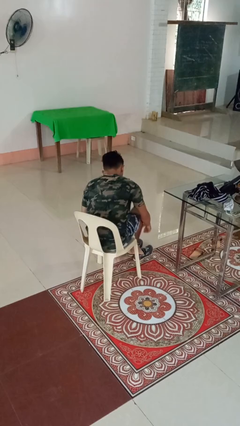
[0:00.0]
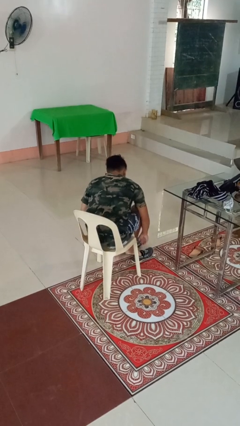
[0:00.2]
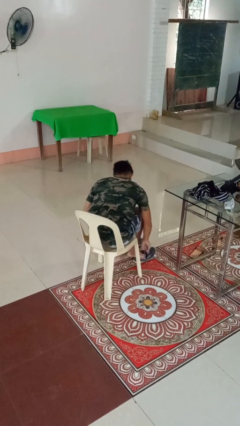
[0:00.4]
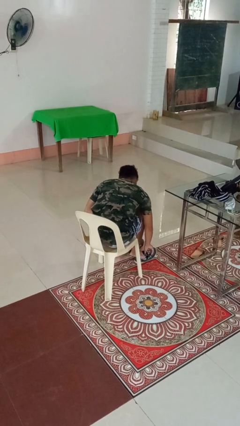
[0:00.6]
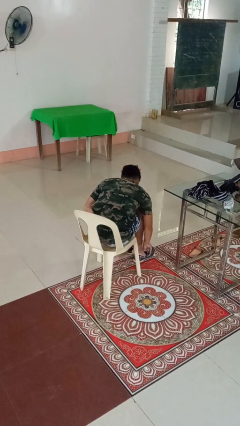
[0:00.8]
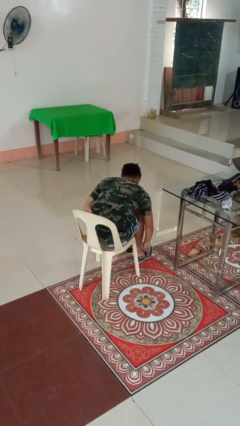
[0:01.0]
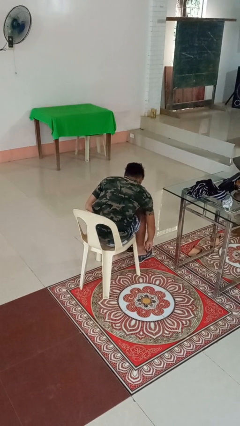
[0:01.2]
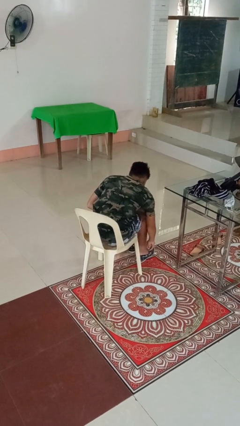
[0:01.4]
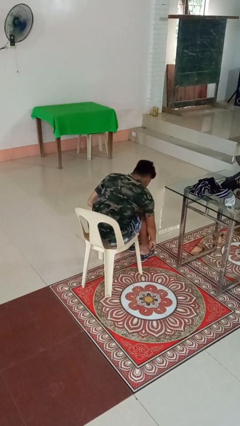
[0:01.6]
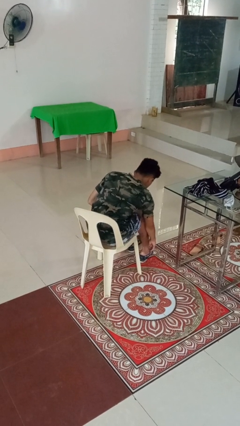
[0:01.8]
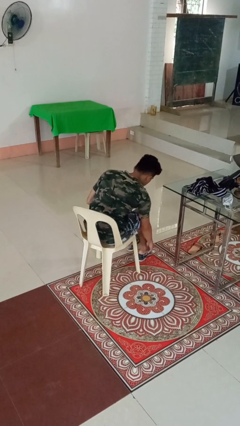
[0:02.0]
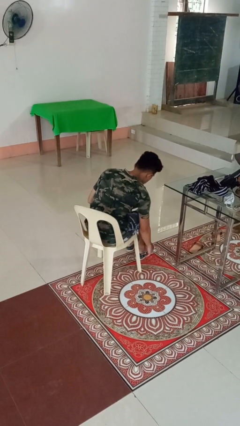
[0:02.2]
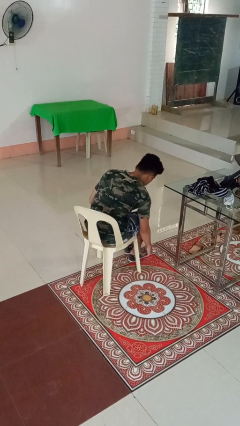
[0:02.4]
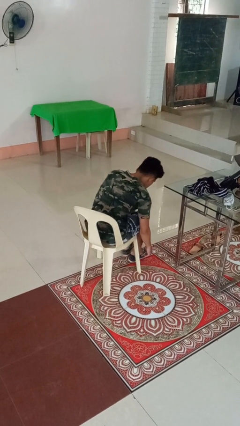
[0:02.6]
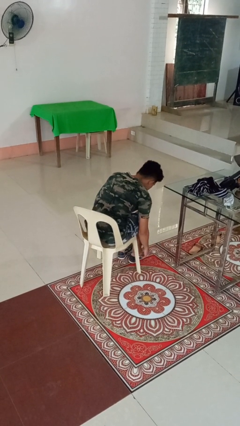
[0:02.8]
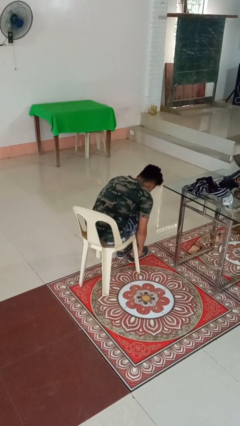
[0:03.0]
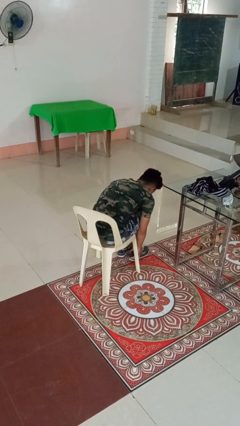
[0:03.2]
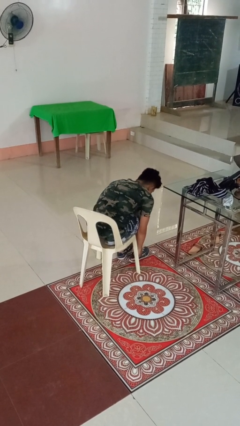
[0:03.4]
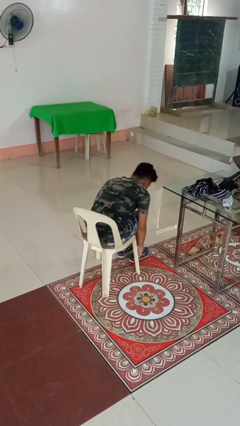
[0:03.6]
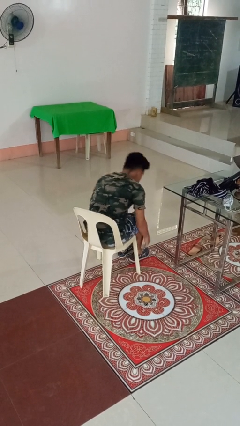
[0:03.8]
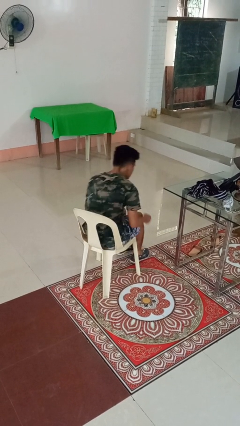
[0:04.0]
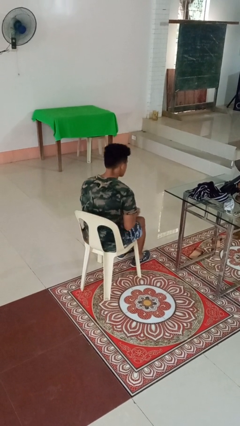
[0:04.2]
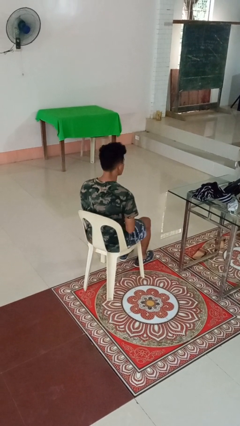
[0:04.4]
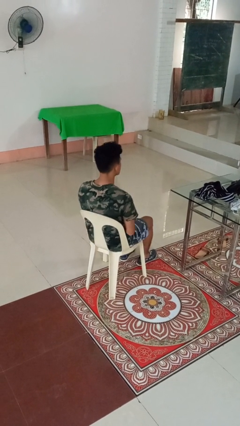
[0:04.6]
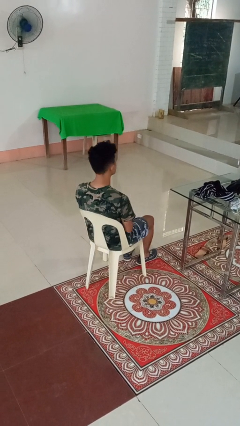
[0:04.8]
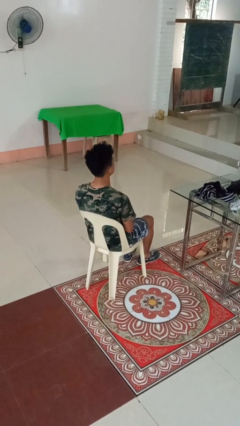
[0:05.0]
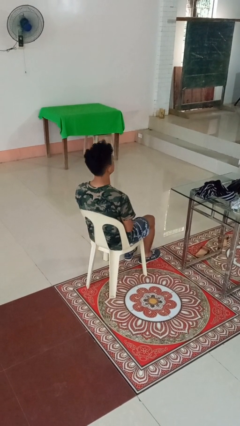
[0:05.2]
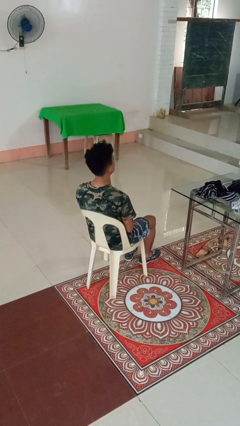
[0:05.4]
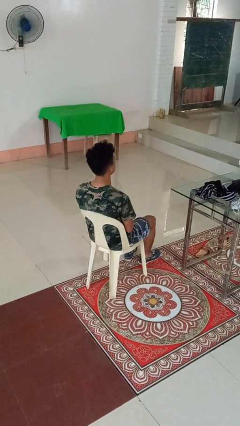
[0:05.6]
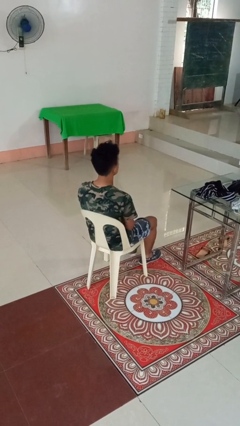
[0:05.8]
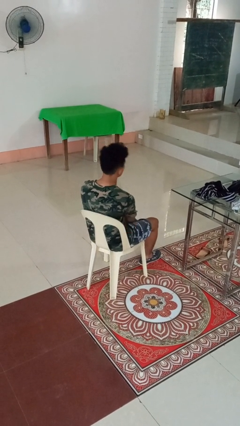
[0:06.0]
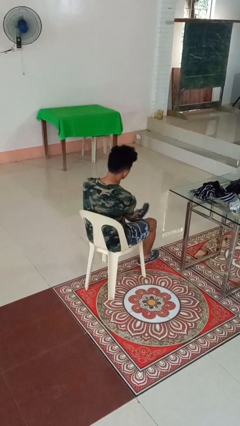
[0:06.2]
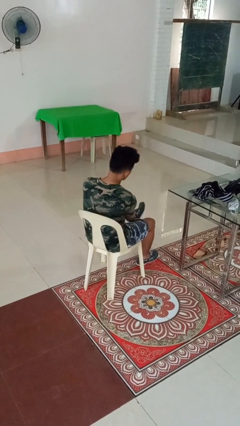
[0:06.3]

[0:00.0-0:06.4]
person puts on shoes

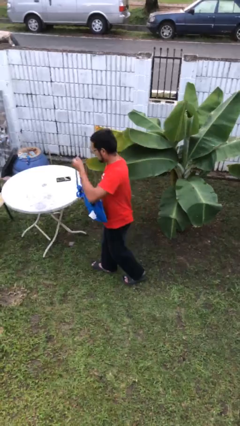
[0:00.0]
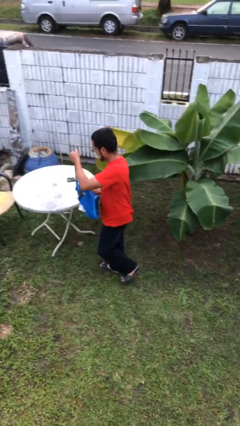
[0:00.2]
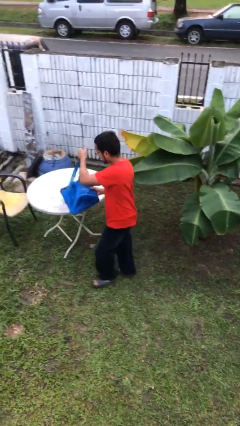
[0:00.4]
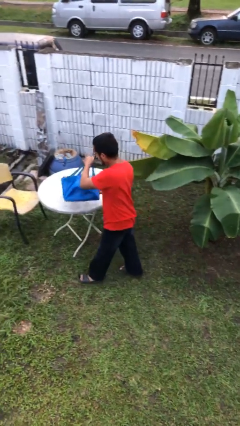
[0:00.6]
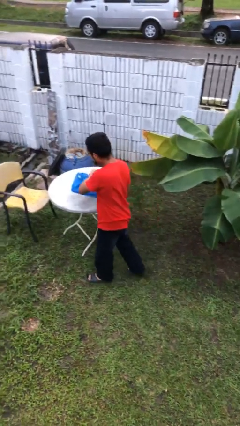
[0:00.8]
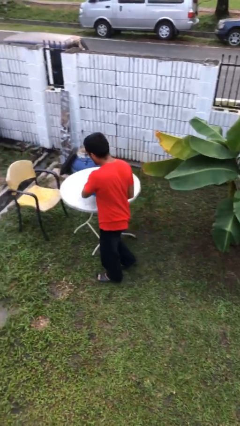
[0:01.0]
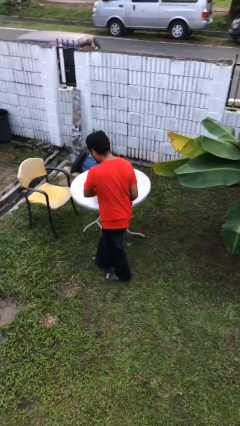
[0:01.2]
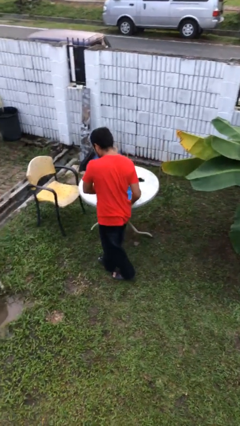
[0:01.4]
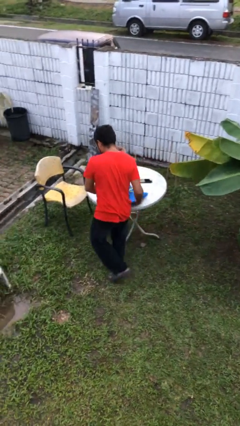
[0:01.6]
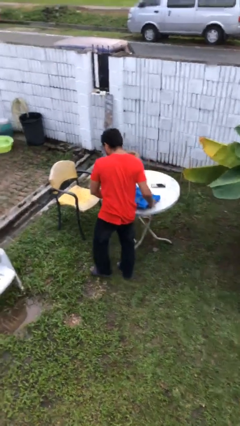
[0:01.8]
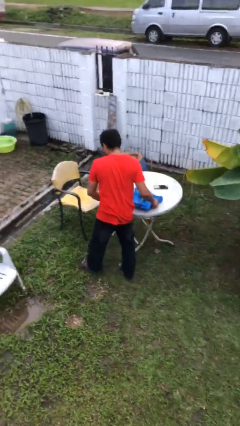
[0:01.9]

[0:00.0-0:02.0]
person puts down object on table

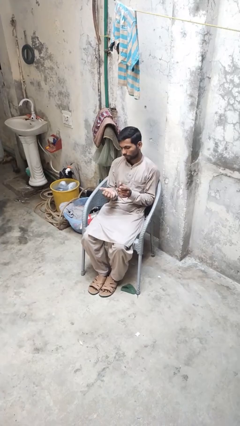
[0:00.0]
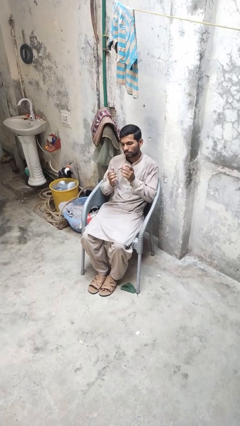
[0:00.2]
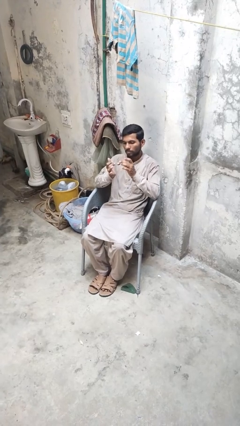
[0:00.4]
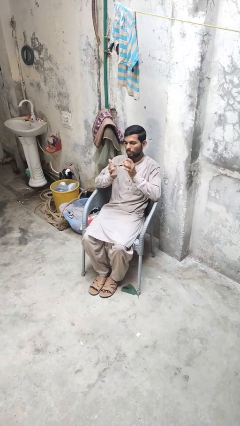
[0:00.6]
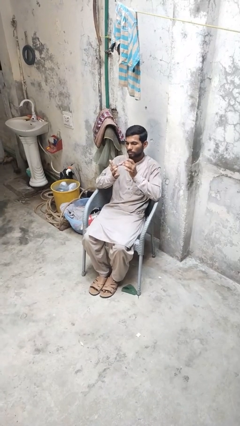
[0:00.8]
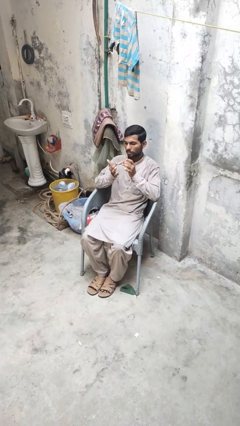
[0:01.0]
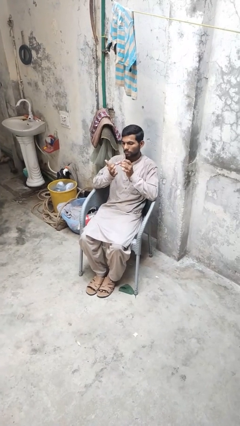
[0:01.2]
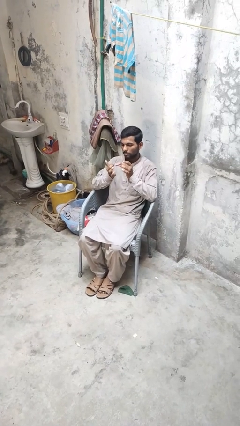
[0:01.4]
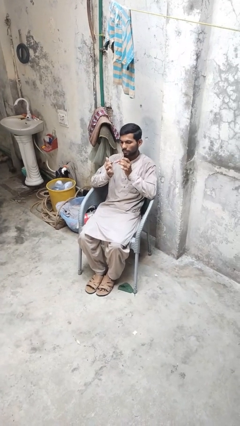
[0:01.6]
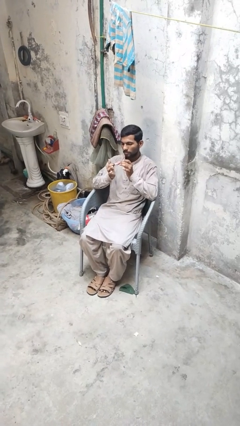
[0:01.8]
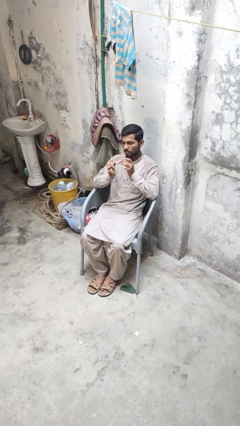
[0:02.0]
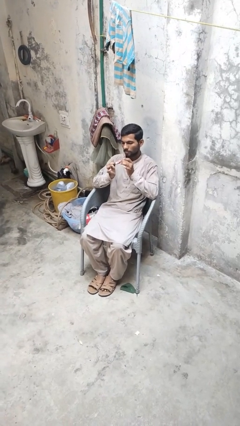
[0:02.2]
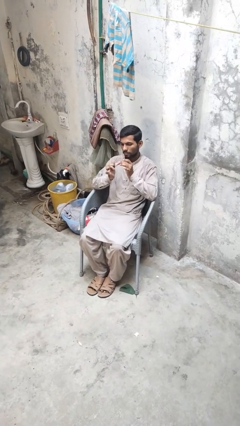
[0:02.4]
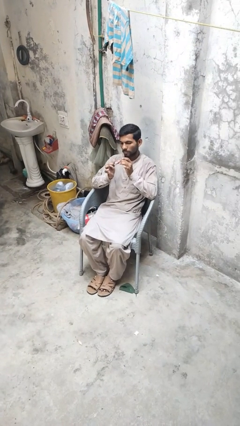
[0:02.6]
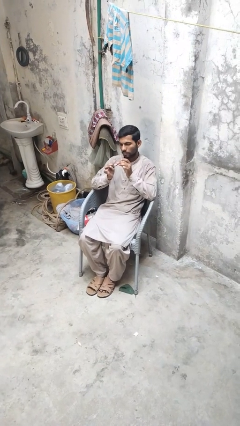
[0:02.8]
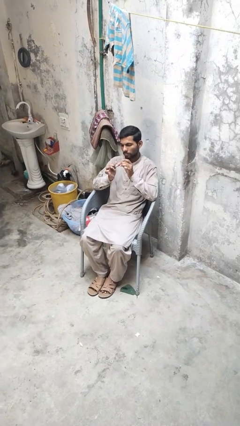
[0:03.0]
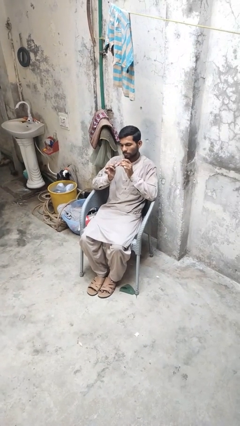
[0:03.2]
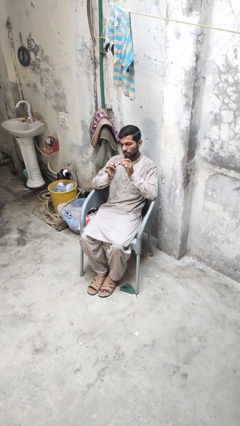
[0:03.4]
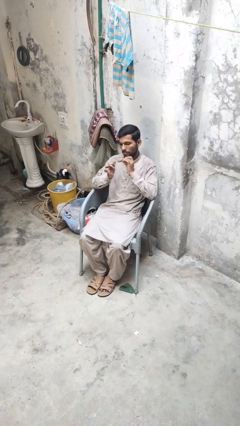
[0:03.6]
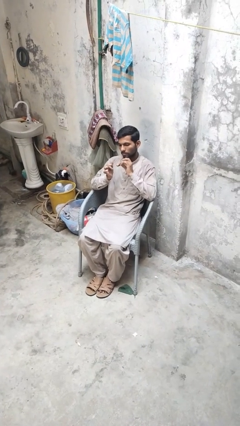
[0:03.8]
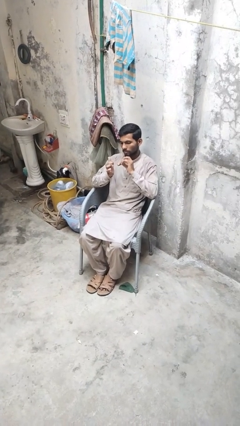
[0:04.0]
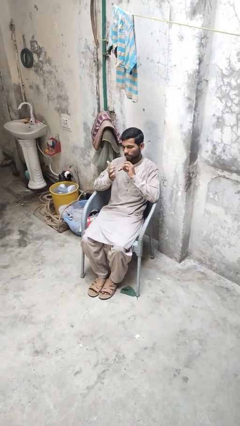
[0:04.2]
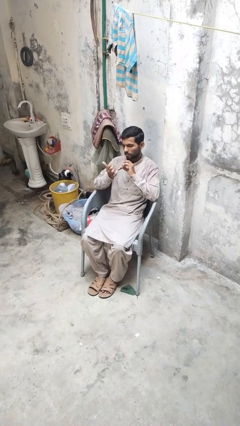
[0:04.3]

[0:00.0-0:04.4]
person clips fingernails

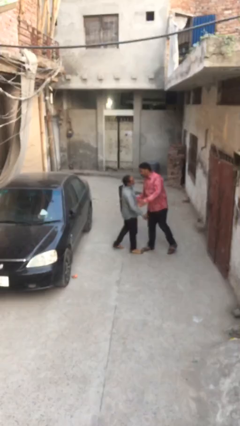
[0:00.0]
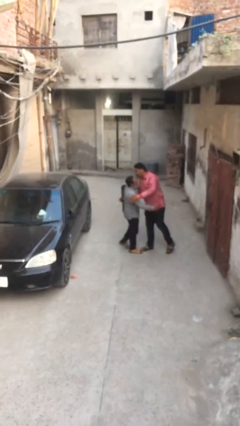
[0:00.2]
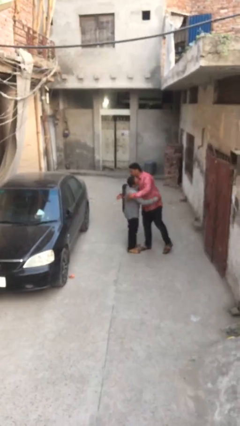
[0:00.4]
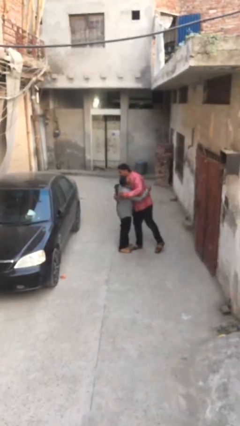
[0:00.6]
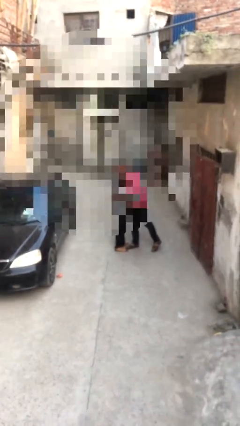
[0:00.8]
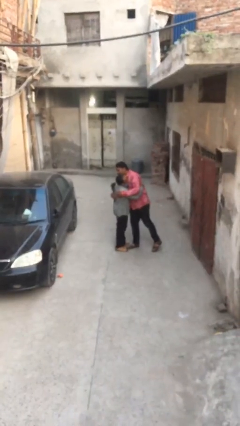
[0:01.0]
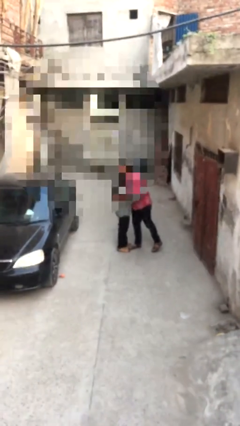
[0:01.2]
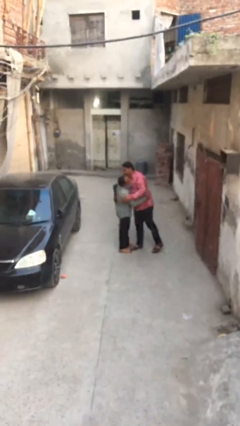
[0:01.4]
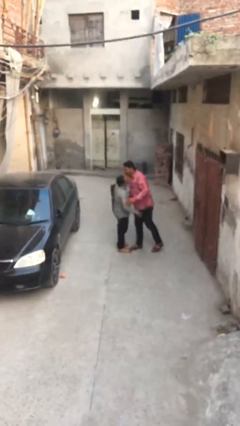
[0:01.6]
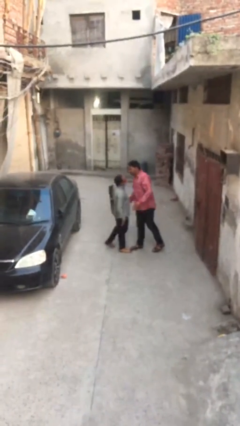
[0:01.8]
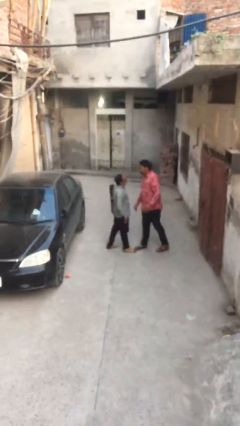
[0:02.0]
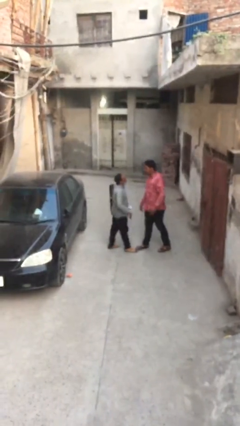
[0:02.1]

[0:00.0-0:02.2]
person embraces person

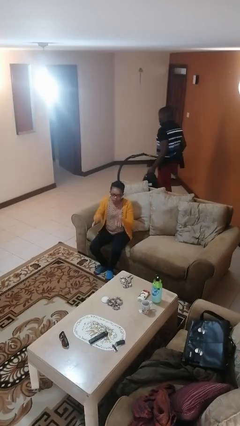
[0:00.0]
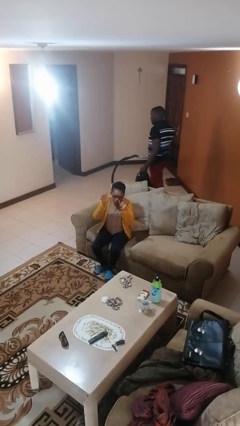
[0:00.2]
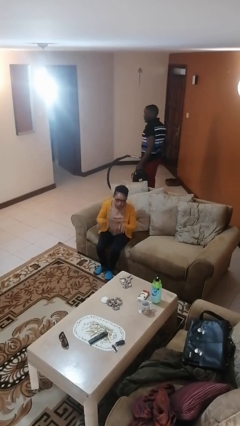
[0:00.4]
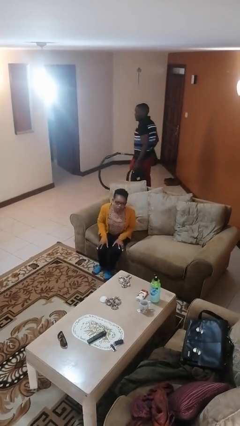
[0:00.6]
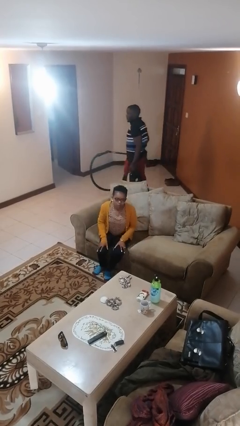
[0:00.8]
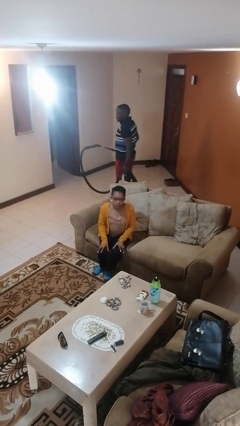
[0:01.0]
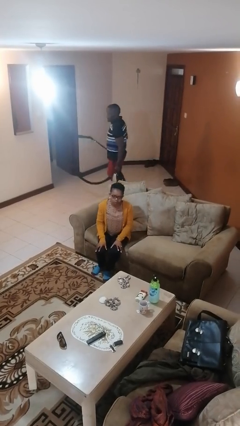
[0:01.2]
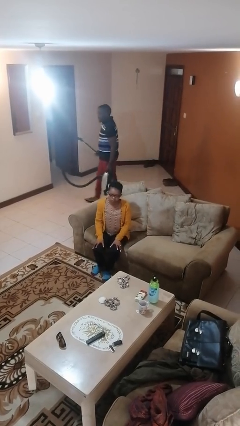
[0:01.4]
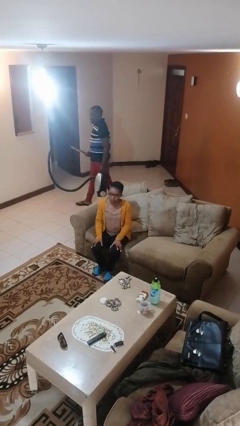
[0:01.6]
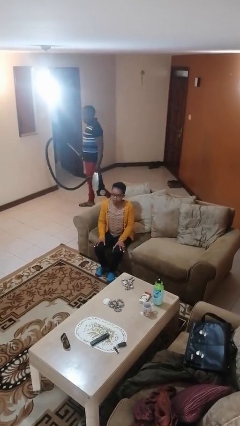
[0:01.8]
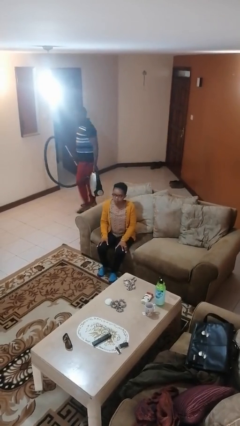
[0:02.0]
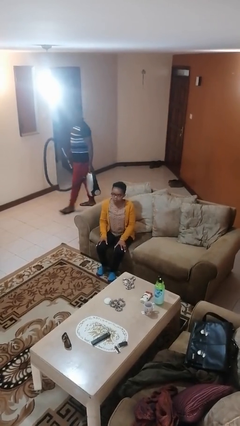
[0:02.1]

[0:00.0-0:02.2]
person slaps hands on thighs

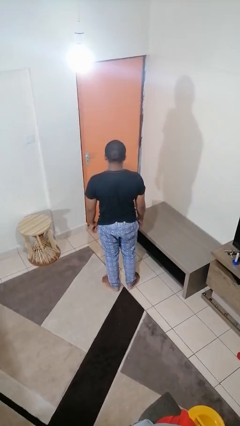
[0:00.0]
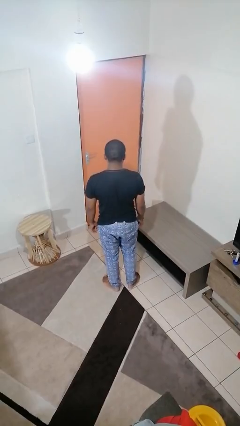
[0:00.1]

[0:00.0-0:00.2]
person stubs toe
